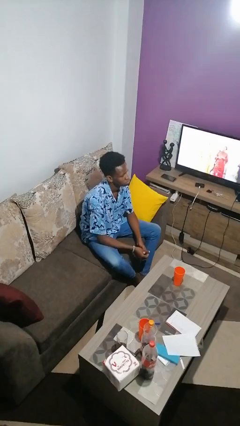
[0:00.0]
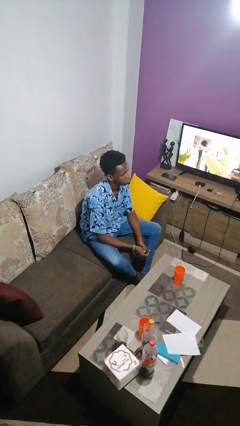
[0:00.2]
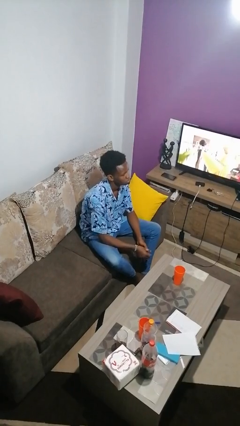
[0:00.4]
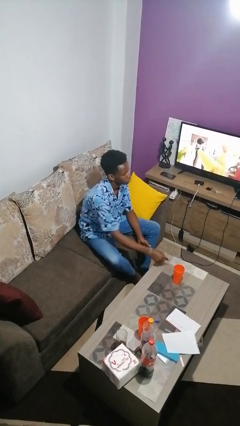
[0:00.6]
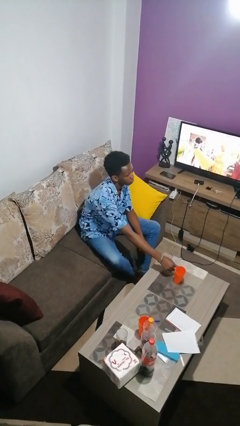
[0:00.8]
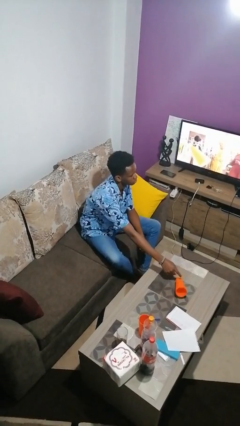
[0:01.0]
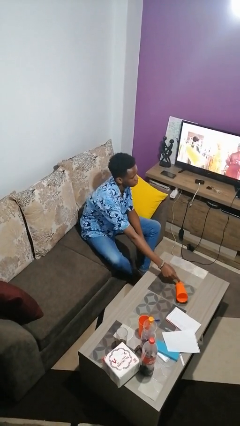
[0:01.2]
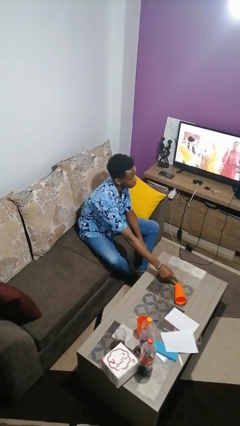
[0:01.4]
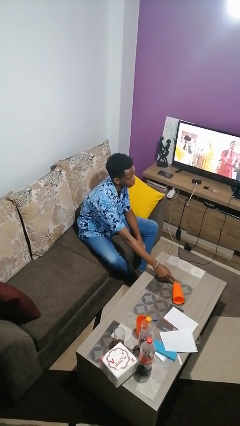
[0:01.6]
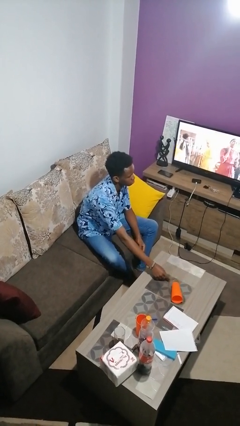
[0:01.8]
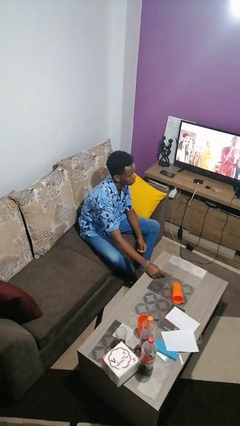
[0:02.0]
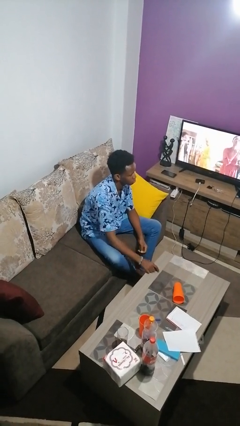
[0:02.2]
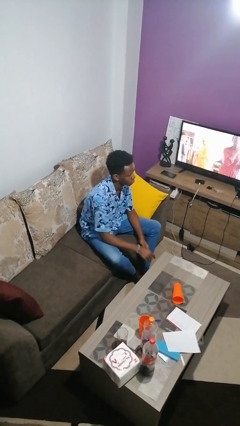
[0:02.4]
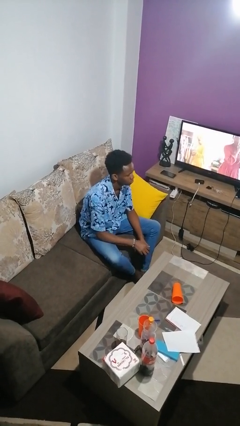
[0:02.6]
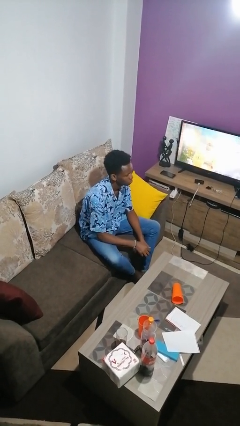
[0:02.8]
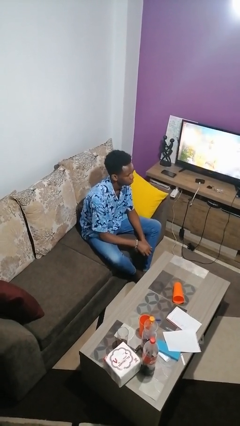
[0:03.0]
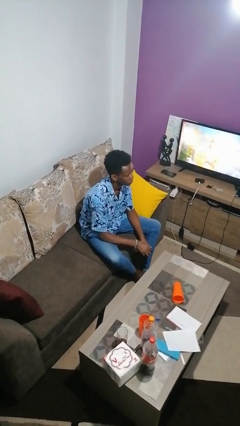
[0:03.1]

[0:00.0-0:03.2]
person knocks over glass

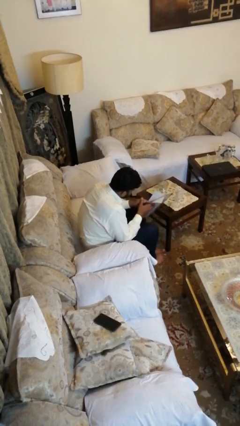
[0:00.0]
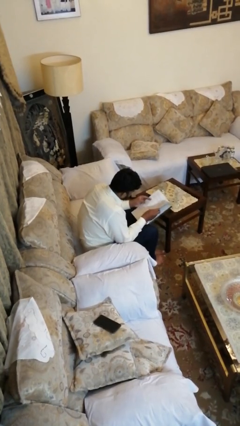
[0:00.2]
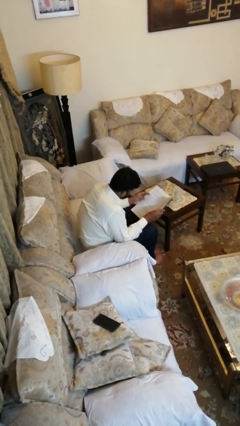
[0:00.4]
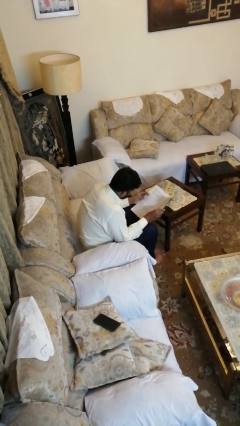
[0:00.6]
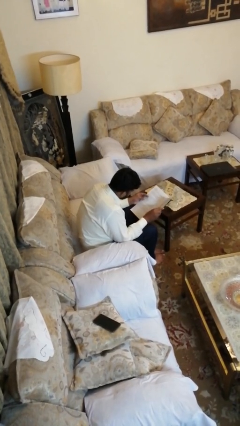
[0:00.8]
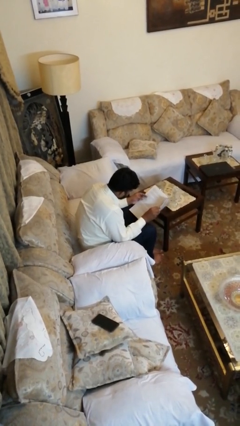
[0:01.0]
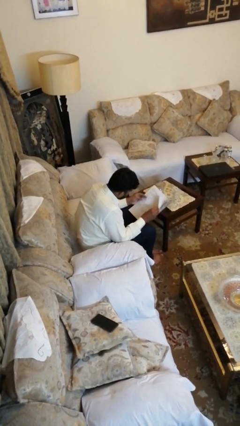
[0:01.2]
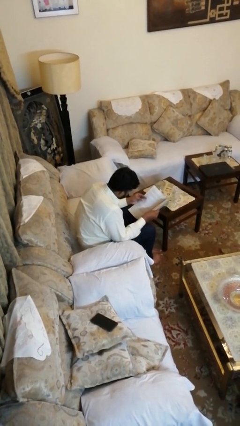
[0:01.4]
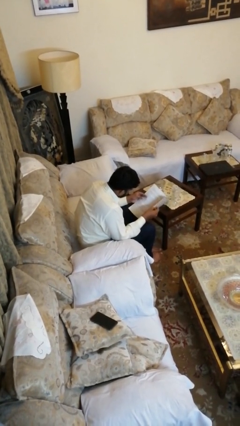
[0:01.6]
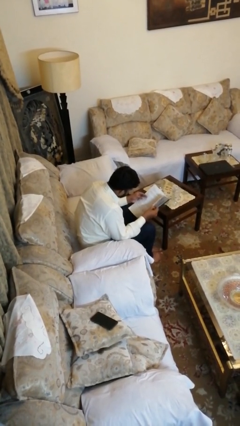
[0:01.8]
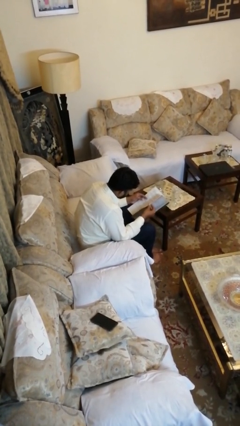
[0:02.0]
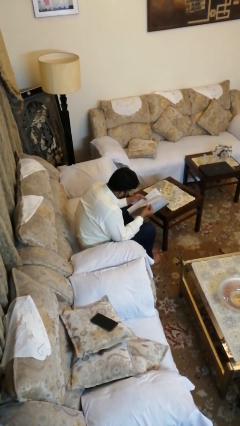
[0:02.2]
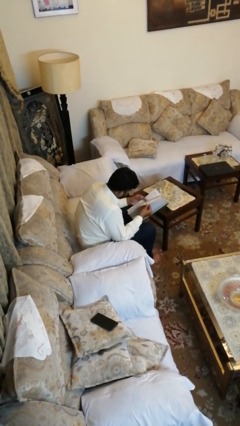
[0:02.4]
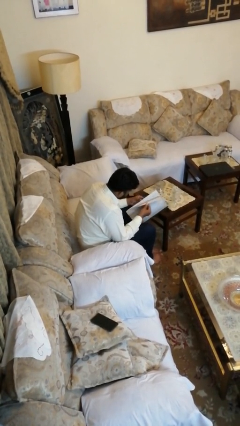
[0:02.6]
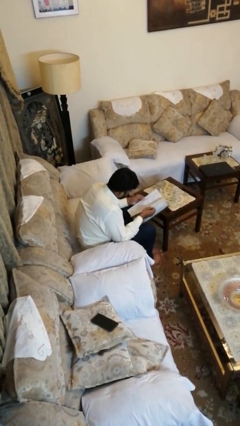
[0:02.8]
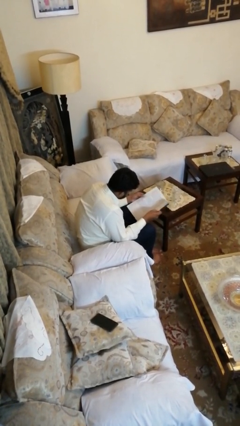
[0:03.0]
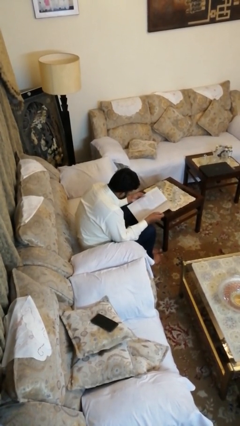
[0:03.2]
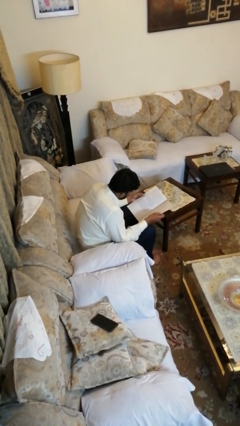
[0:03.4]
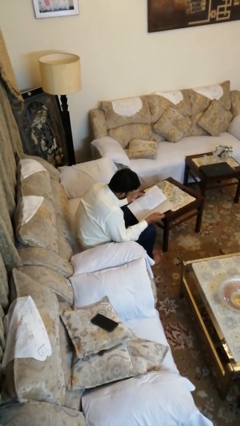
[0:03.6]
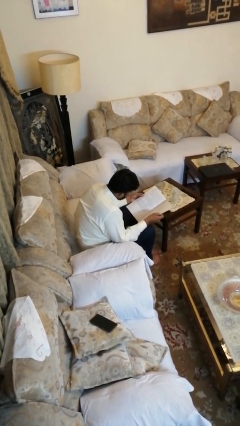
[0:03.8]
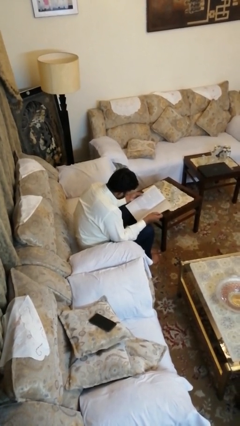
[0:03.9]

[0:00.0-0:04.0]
person reads magazine

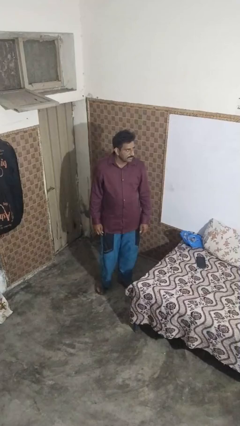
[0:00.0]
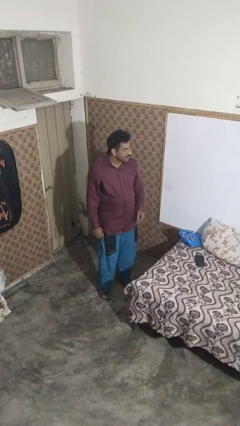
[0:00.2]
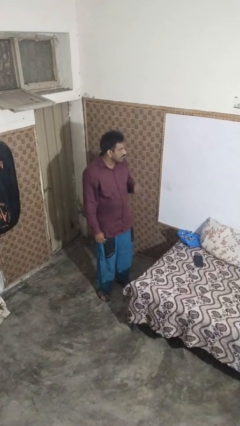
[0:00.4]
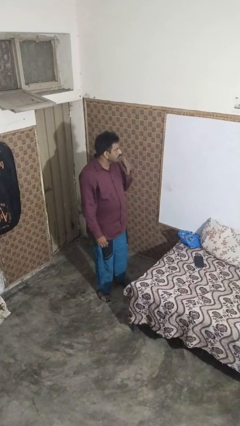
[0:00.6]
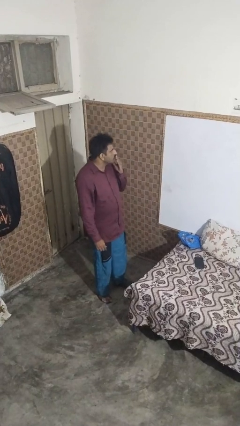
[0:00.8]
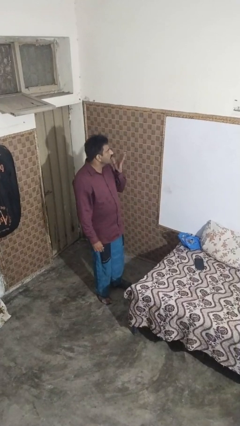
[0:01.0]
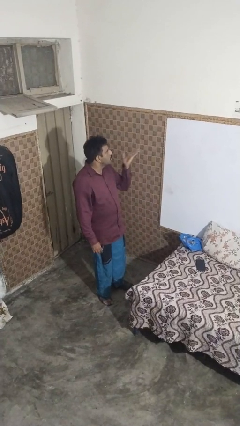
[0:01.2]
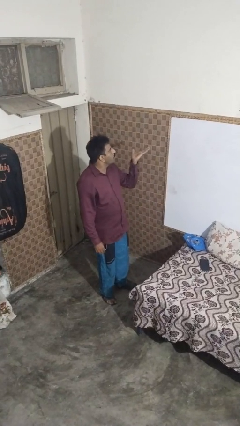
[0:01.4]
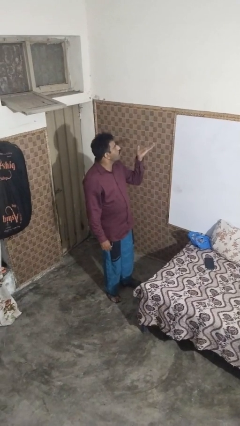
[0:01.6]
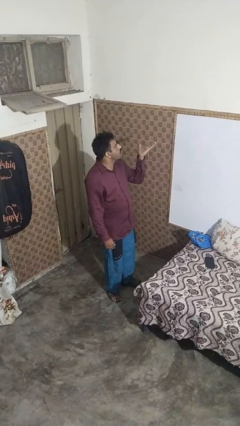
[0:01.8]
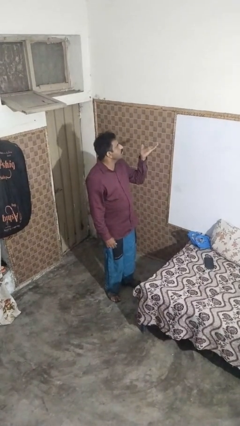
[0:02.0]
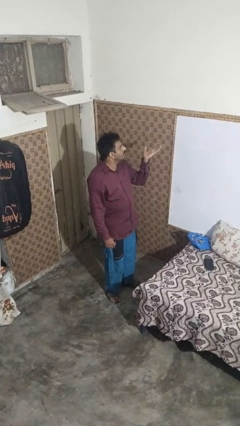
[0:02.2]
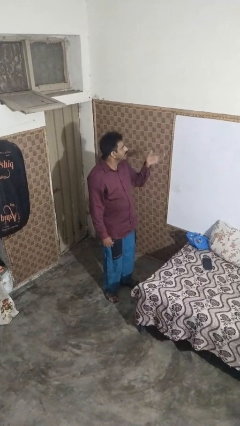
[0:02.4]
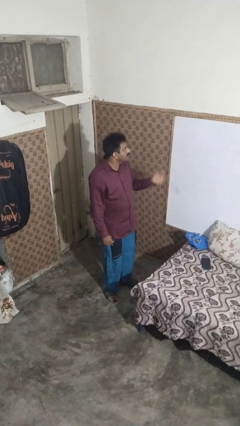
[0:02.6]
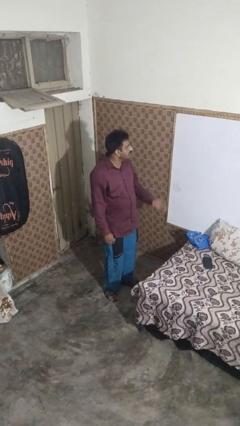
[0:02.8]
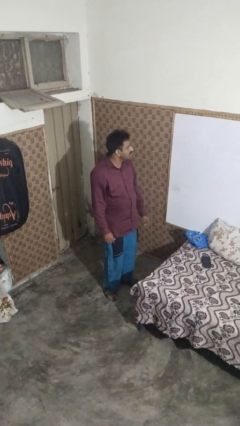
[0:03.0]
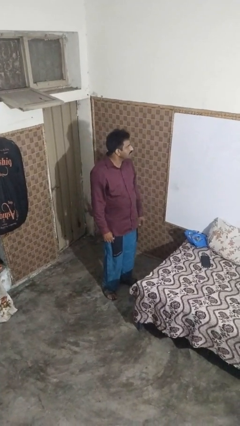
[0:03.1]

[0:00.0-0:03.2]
person gestures blow kiss

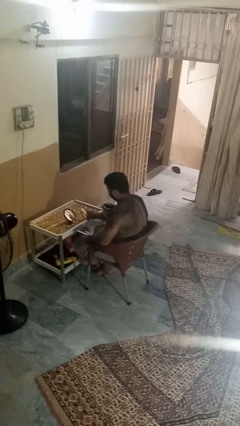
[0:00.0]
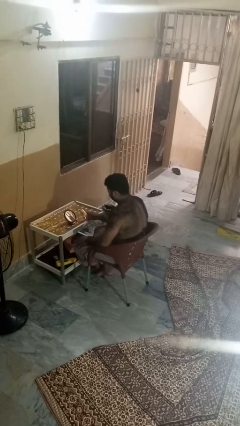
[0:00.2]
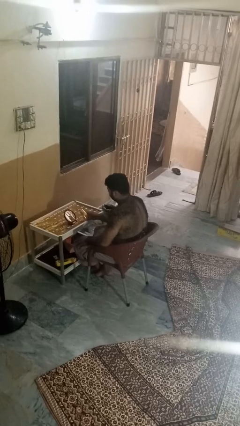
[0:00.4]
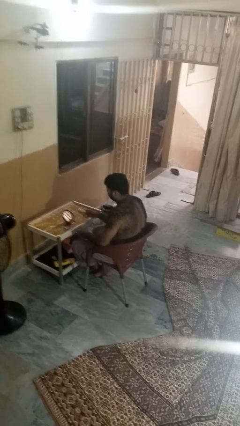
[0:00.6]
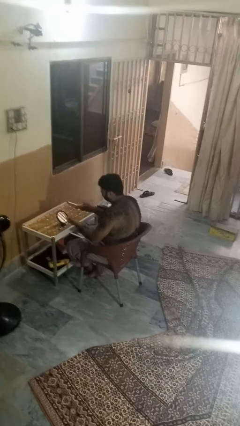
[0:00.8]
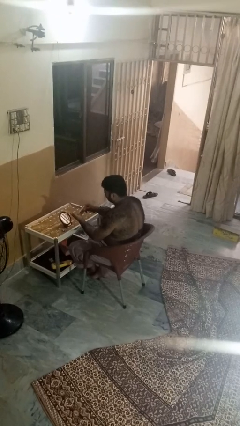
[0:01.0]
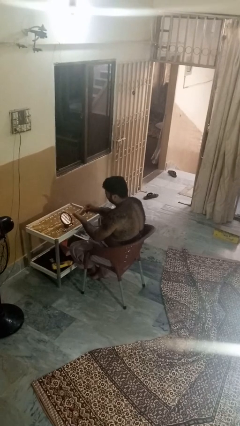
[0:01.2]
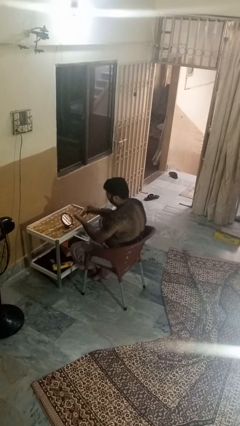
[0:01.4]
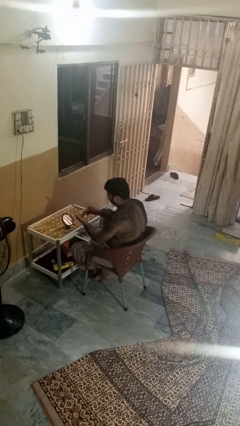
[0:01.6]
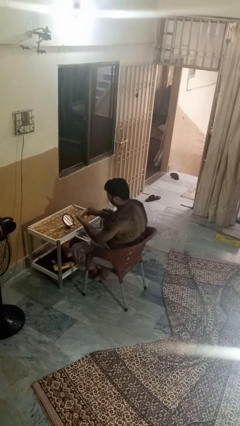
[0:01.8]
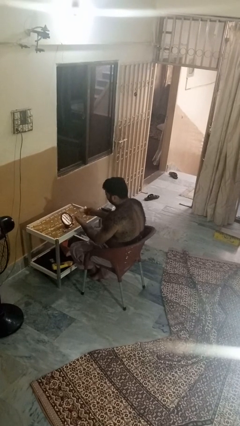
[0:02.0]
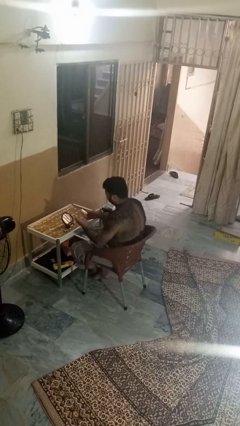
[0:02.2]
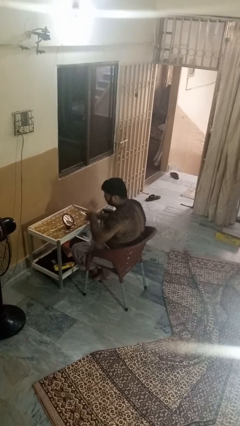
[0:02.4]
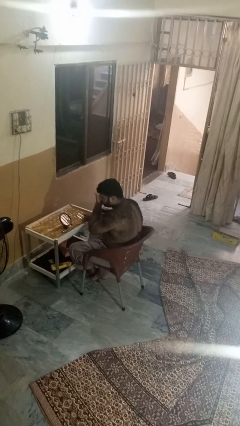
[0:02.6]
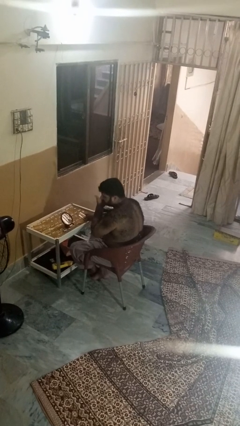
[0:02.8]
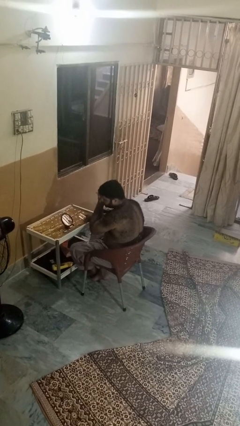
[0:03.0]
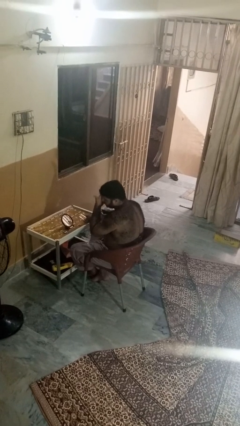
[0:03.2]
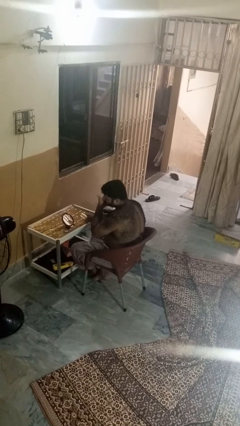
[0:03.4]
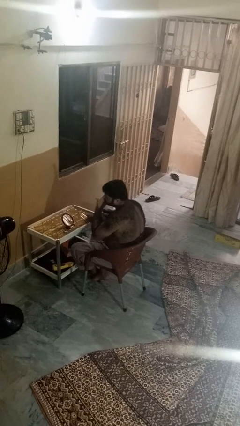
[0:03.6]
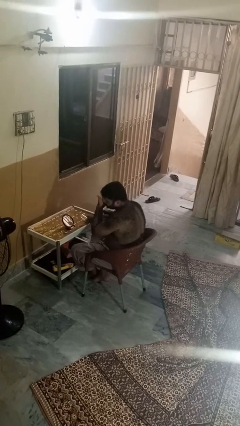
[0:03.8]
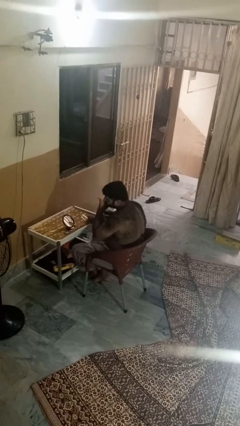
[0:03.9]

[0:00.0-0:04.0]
person applies foundation makeup

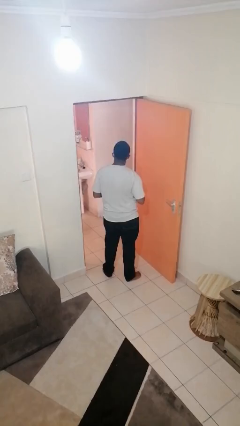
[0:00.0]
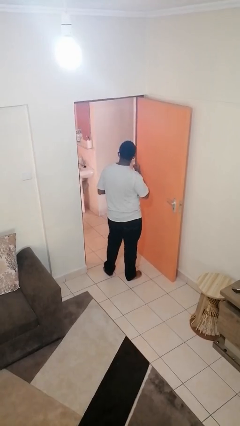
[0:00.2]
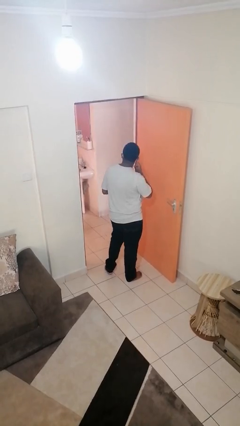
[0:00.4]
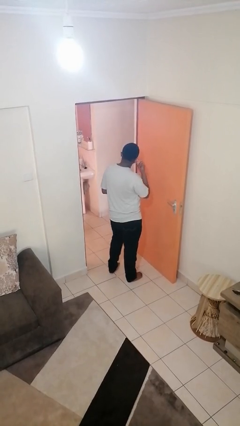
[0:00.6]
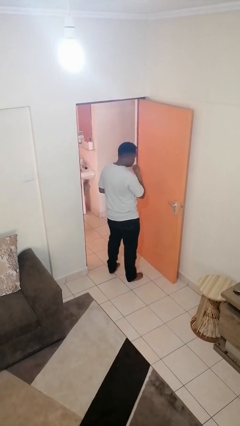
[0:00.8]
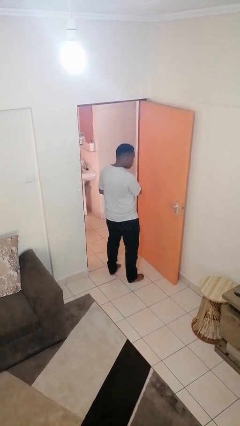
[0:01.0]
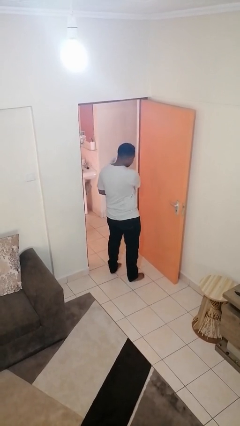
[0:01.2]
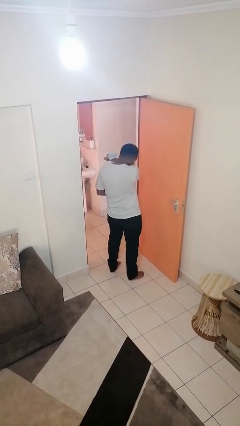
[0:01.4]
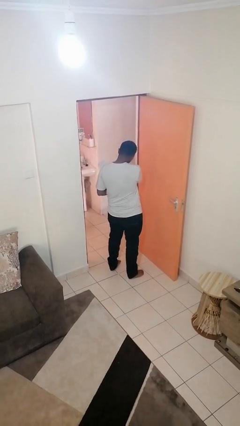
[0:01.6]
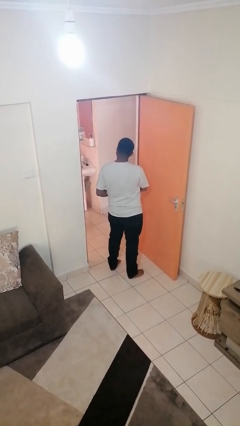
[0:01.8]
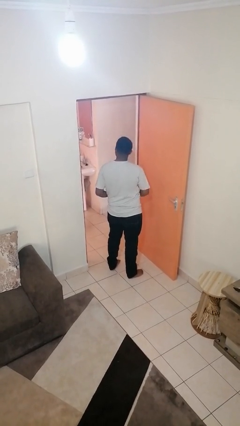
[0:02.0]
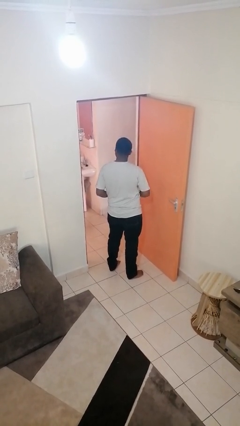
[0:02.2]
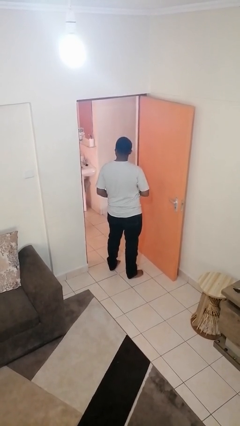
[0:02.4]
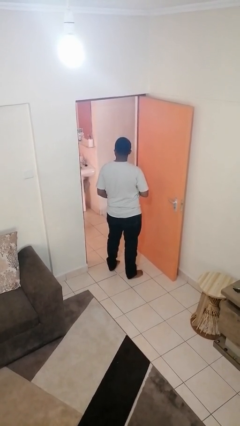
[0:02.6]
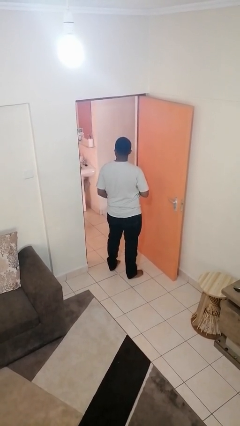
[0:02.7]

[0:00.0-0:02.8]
person takes off facemask

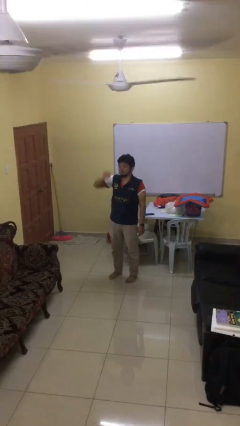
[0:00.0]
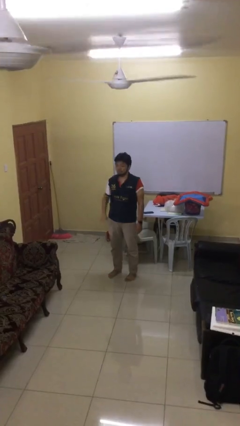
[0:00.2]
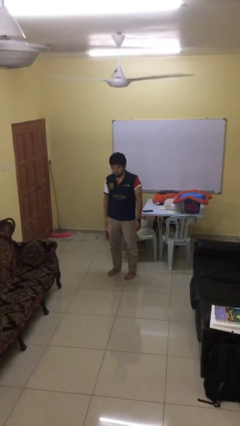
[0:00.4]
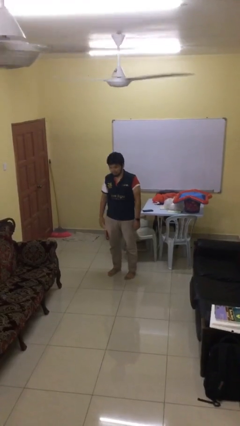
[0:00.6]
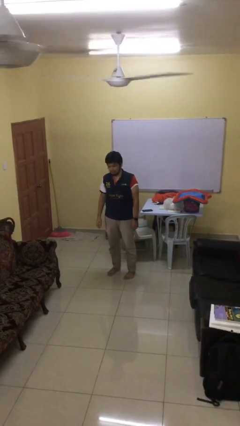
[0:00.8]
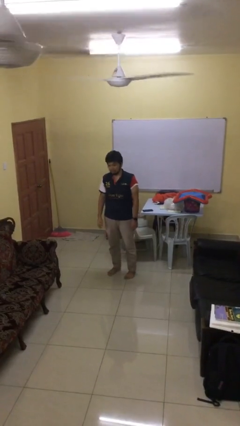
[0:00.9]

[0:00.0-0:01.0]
person gestures lower hand
